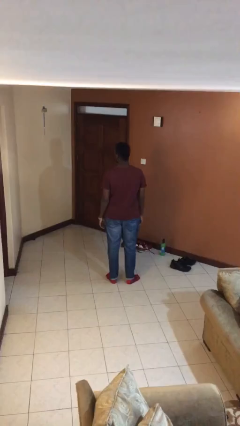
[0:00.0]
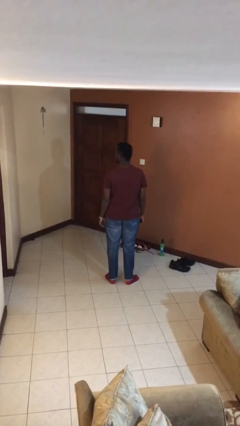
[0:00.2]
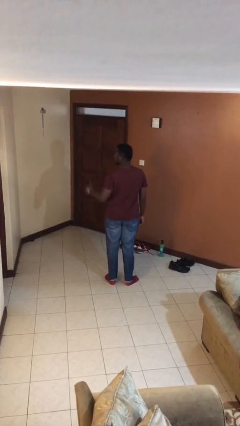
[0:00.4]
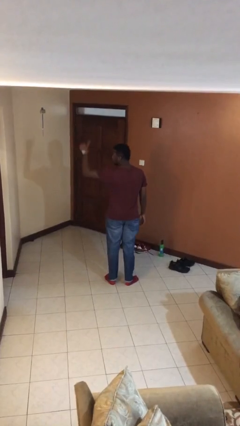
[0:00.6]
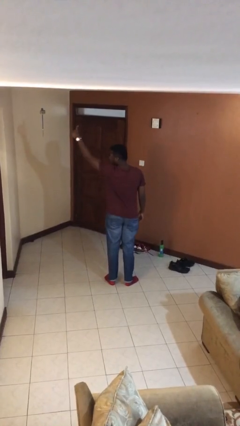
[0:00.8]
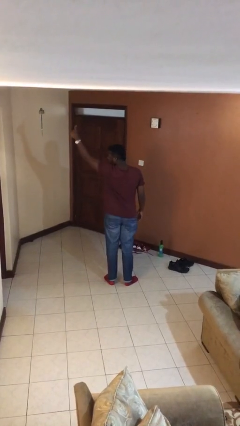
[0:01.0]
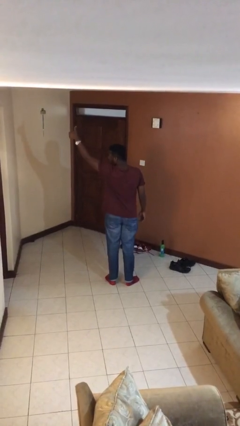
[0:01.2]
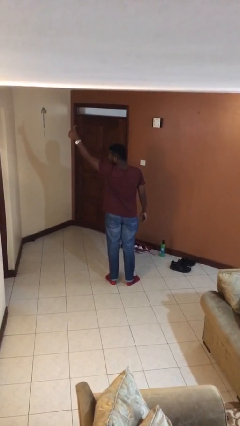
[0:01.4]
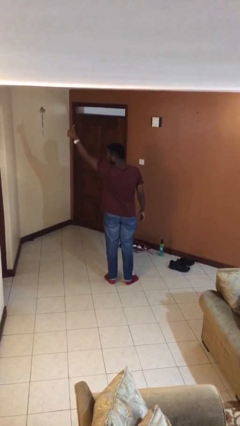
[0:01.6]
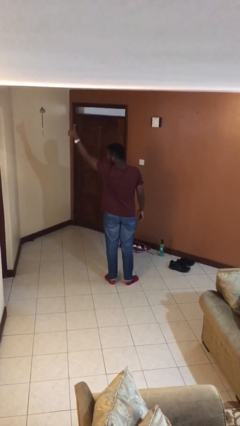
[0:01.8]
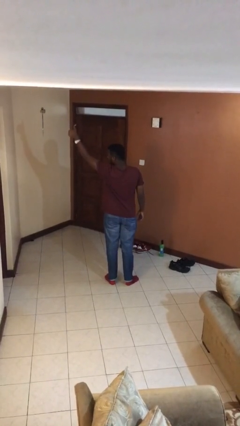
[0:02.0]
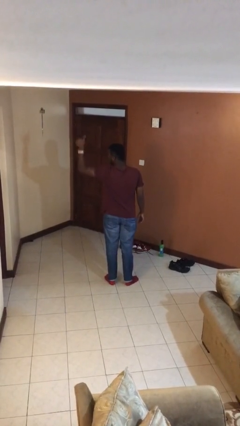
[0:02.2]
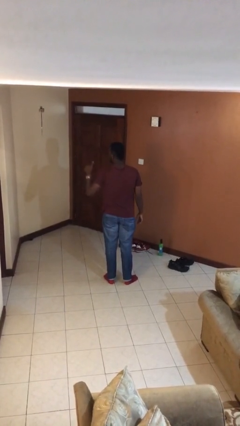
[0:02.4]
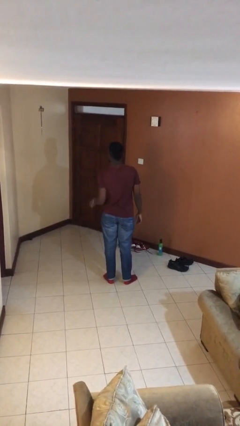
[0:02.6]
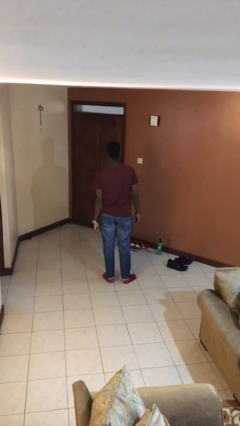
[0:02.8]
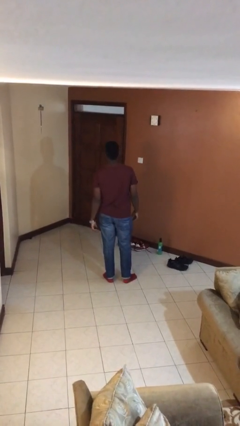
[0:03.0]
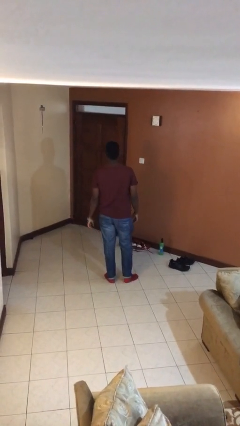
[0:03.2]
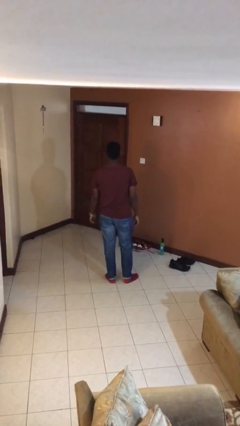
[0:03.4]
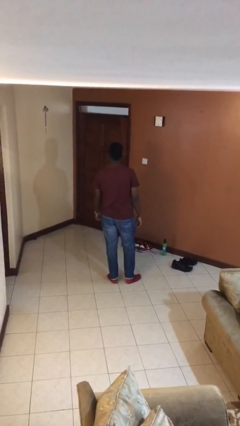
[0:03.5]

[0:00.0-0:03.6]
person gestures thumbs up

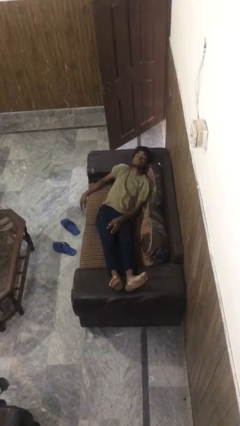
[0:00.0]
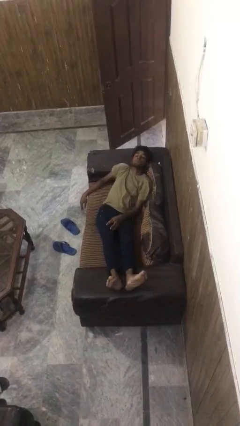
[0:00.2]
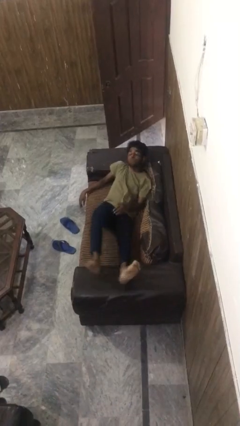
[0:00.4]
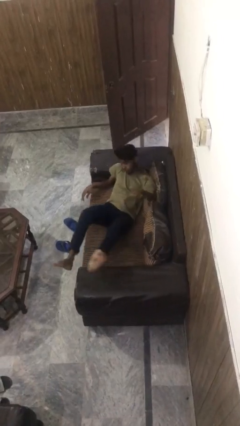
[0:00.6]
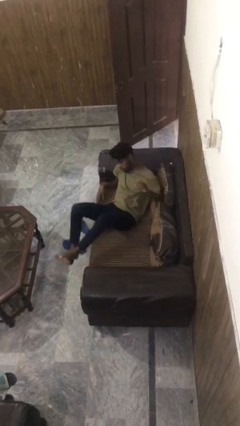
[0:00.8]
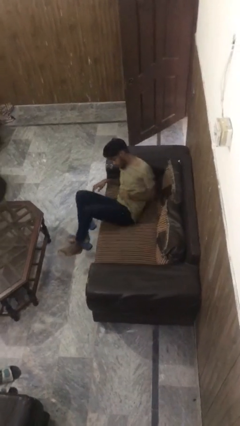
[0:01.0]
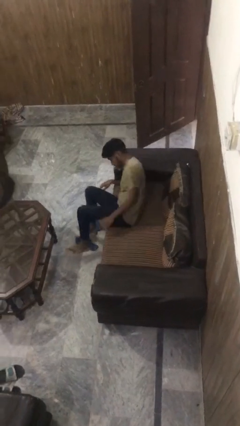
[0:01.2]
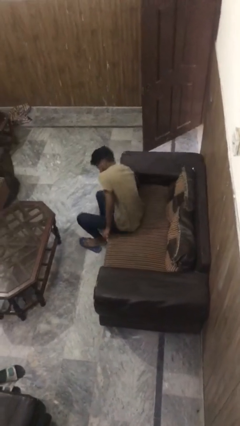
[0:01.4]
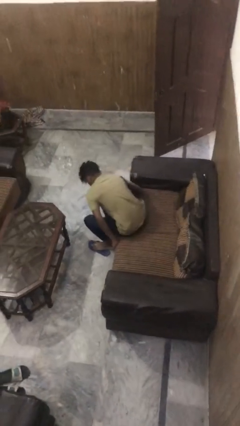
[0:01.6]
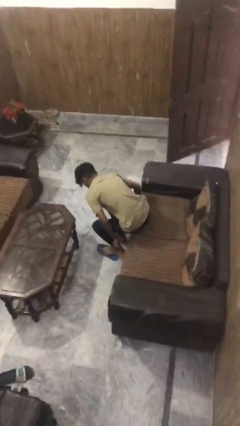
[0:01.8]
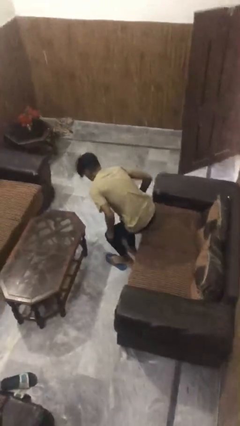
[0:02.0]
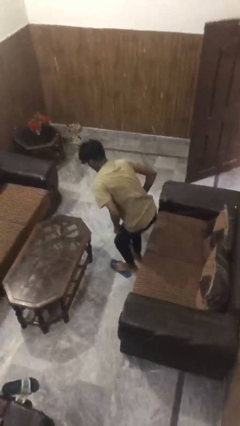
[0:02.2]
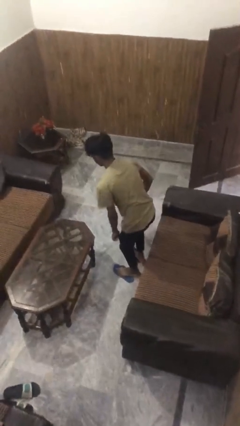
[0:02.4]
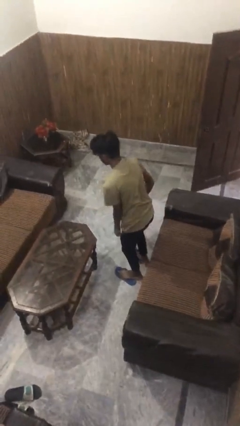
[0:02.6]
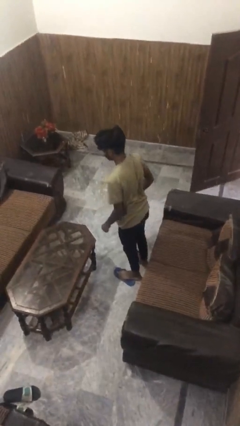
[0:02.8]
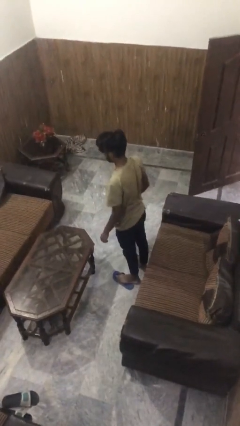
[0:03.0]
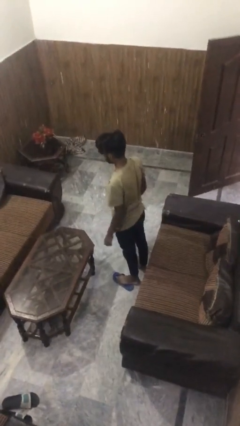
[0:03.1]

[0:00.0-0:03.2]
person stands up

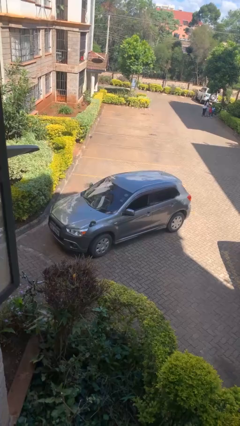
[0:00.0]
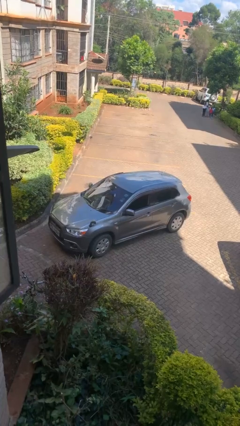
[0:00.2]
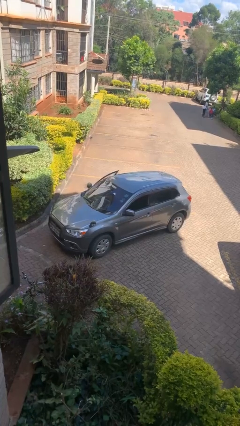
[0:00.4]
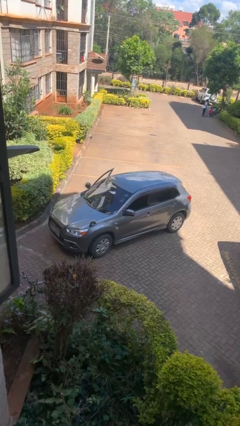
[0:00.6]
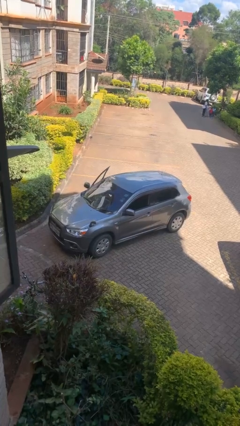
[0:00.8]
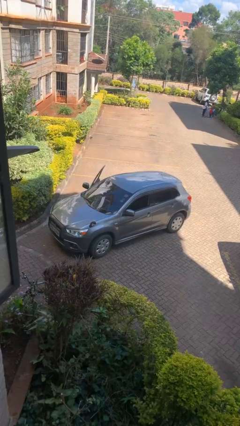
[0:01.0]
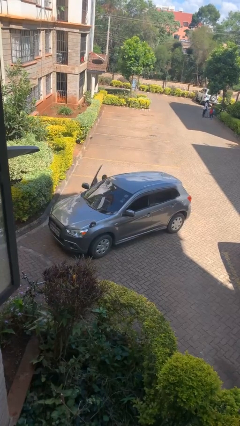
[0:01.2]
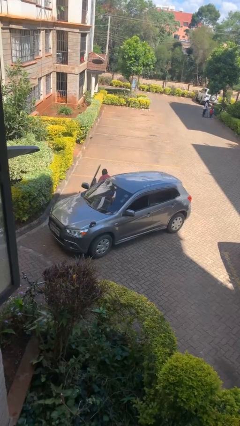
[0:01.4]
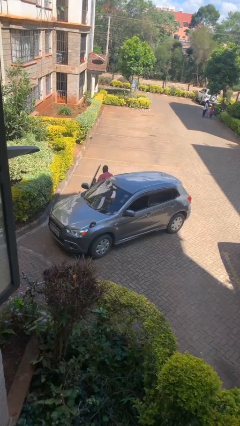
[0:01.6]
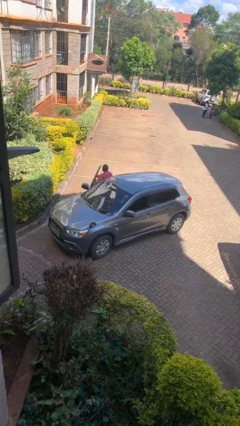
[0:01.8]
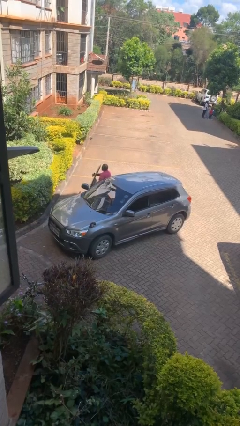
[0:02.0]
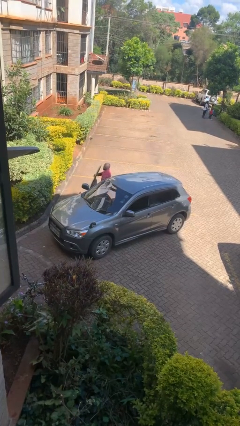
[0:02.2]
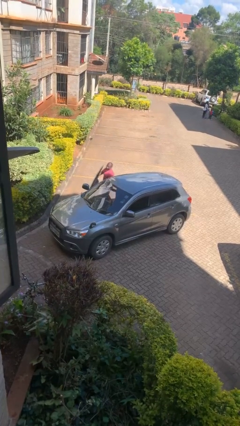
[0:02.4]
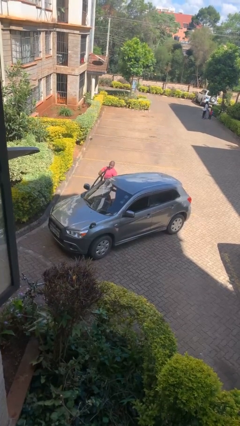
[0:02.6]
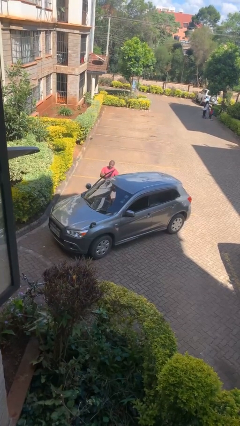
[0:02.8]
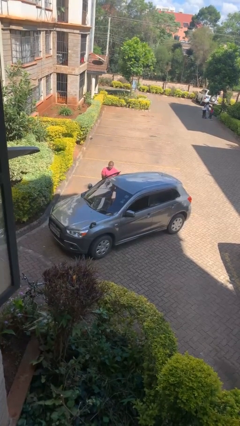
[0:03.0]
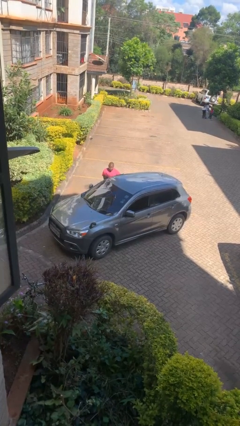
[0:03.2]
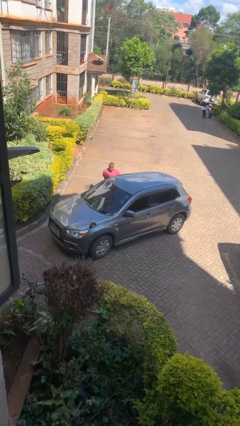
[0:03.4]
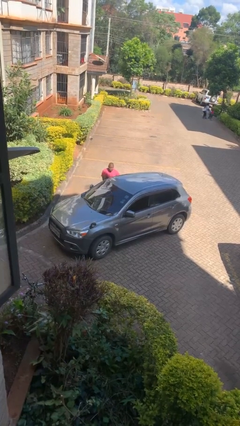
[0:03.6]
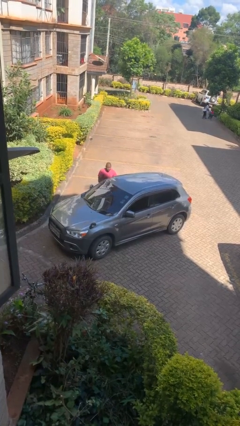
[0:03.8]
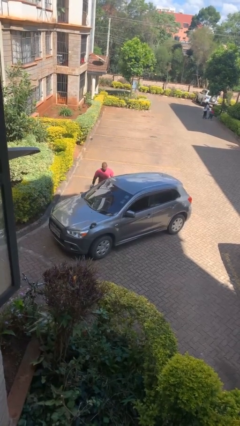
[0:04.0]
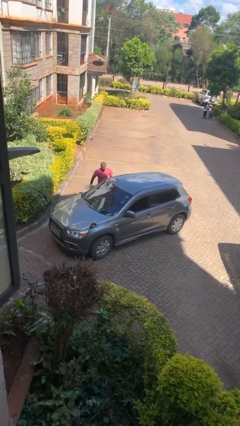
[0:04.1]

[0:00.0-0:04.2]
car drops off person

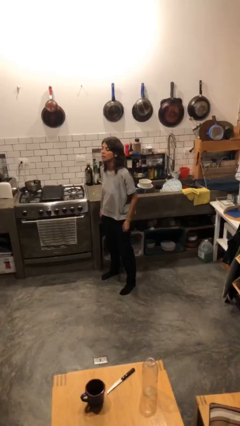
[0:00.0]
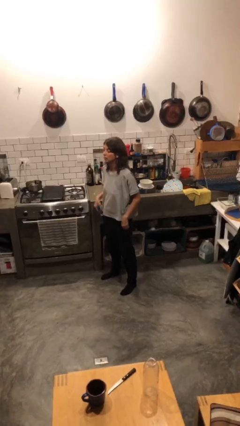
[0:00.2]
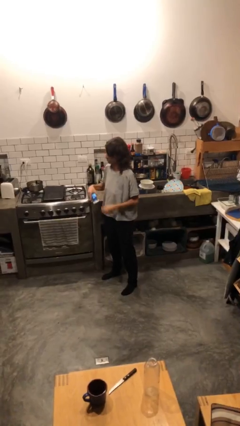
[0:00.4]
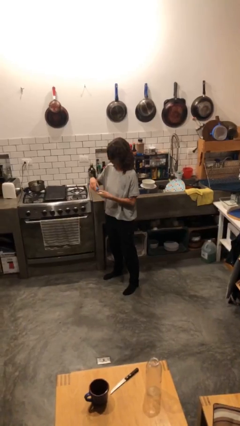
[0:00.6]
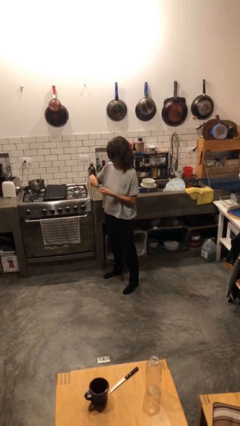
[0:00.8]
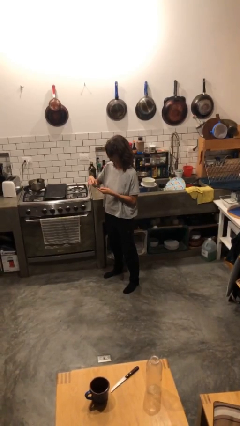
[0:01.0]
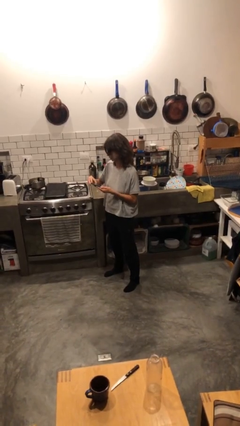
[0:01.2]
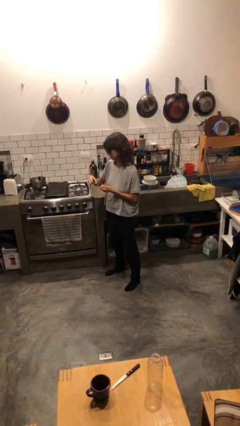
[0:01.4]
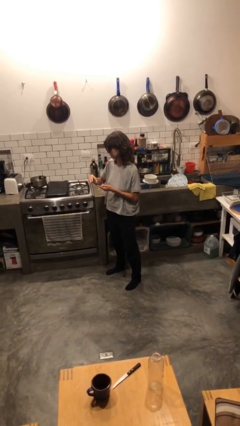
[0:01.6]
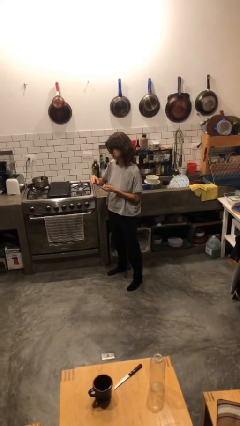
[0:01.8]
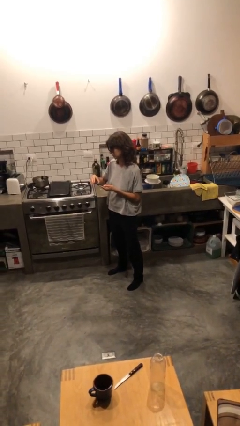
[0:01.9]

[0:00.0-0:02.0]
person takes phone from pocket

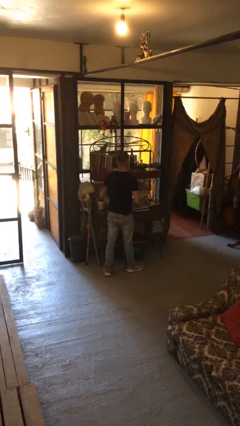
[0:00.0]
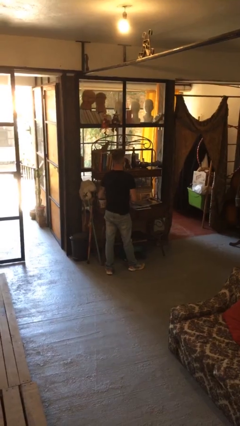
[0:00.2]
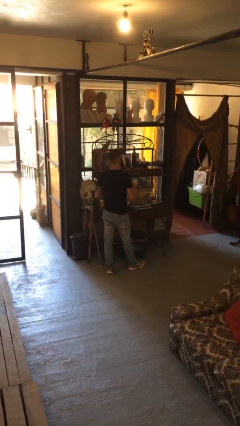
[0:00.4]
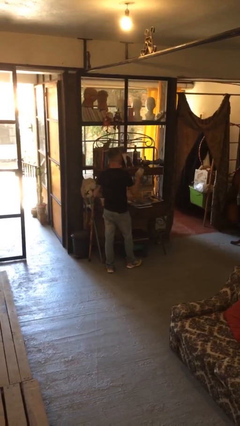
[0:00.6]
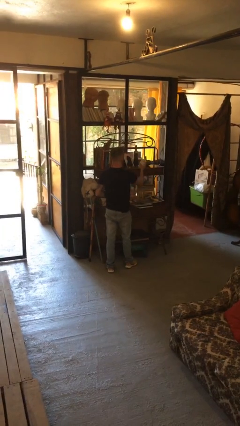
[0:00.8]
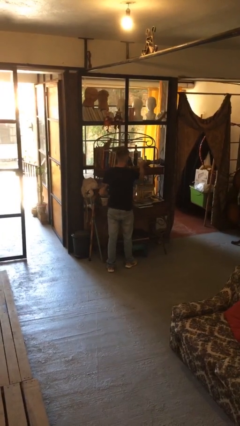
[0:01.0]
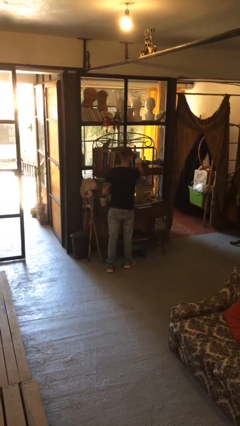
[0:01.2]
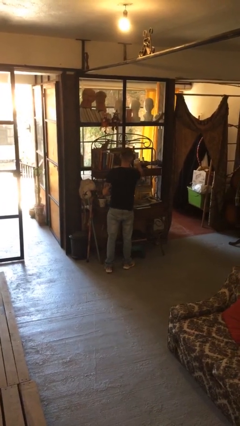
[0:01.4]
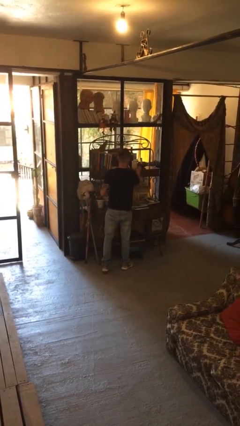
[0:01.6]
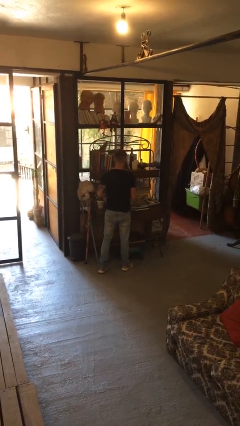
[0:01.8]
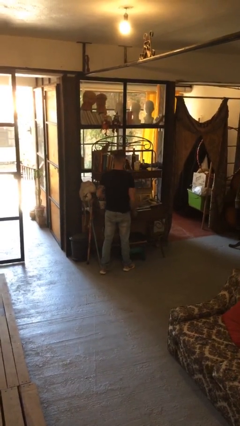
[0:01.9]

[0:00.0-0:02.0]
person puts down object on countertop

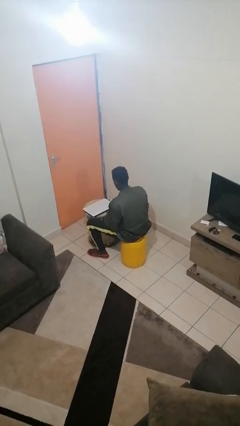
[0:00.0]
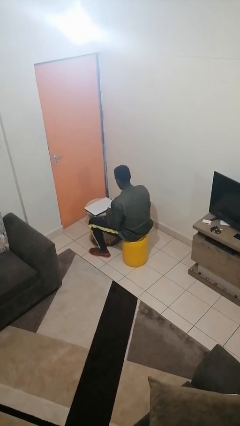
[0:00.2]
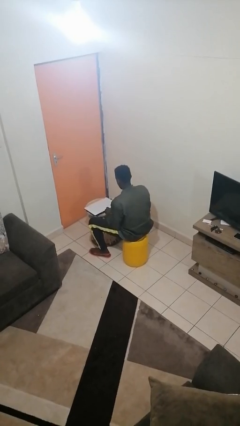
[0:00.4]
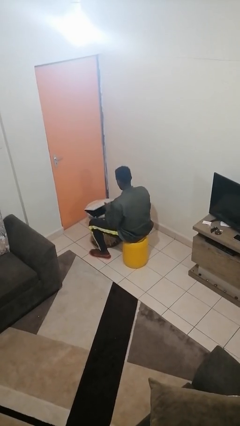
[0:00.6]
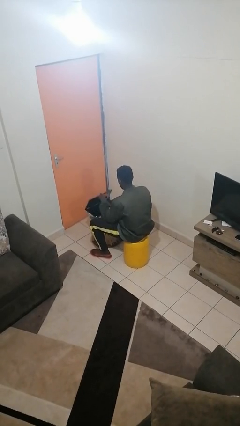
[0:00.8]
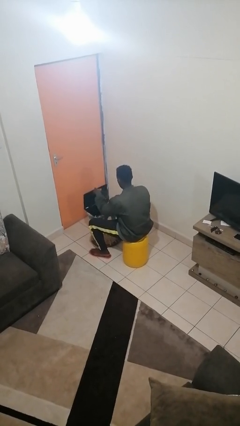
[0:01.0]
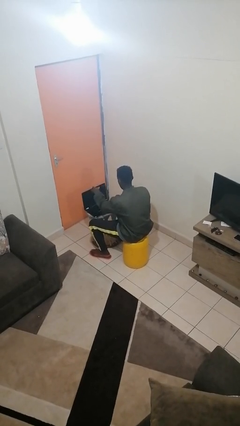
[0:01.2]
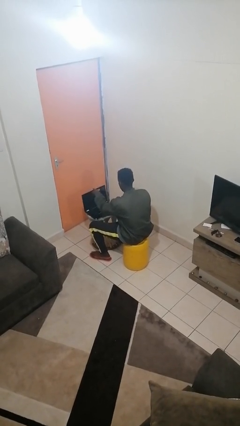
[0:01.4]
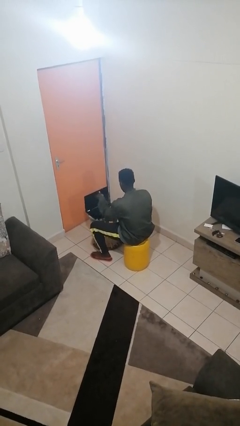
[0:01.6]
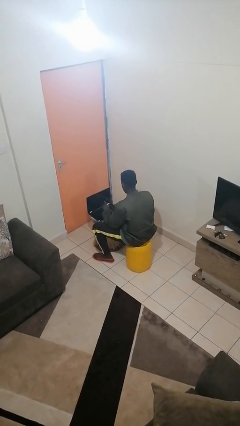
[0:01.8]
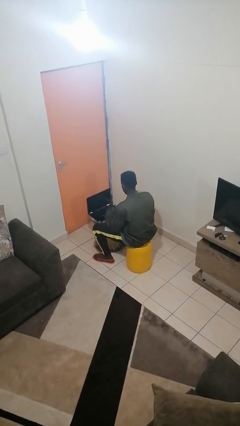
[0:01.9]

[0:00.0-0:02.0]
person opens laptop
